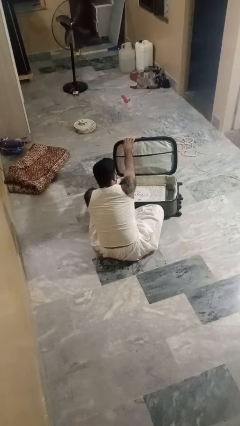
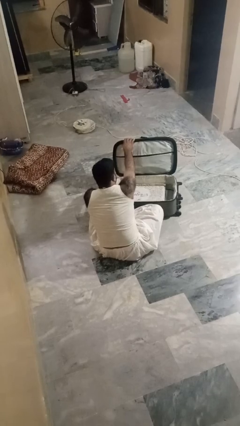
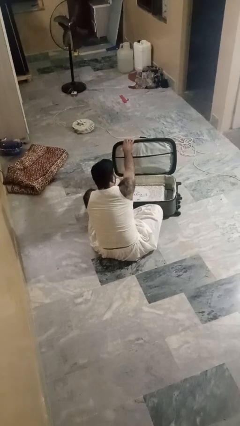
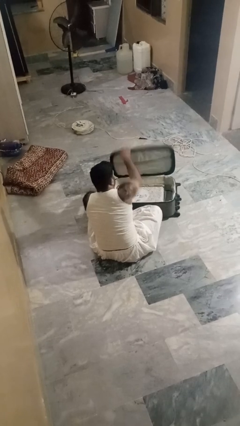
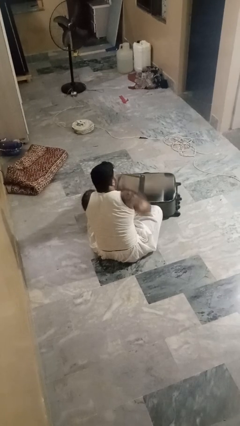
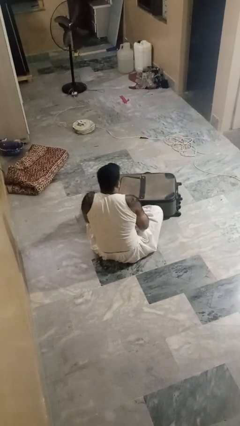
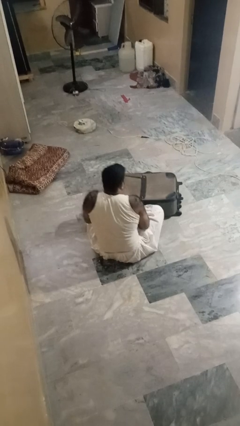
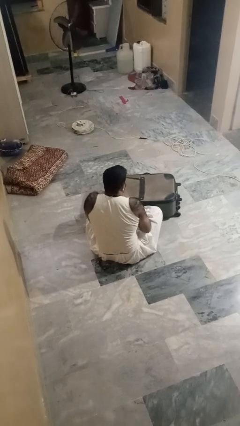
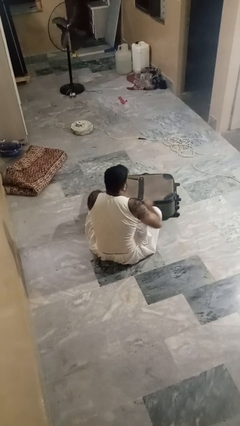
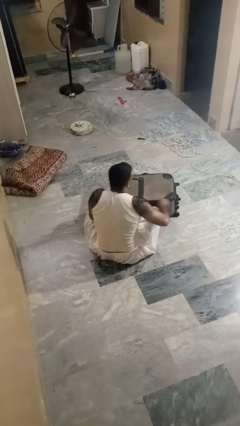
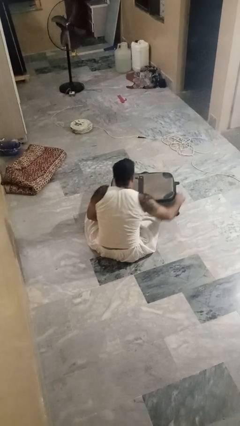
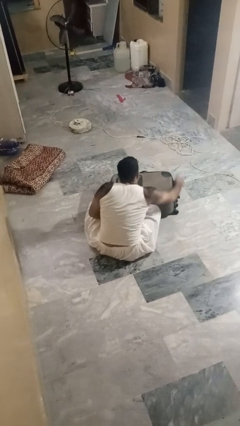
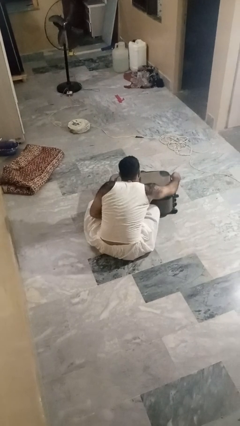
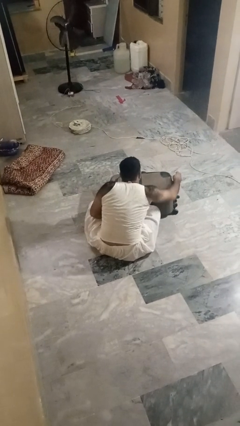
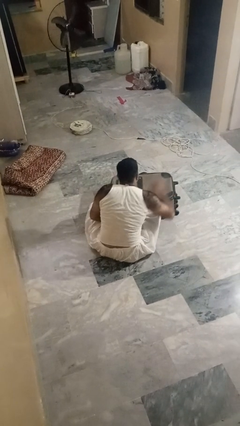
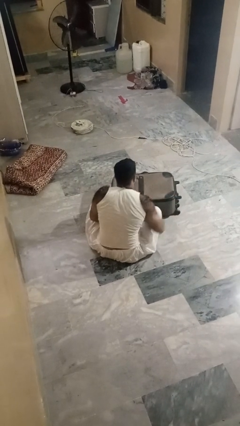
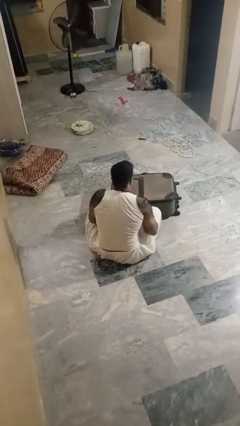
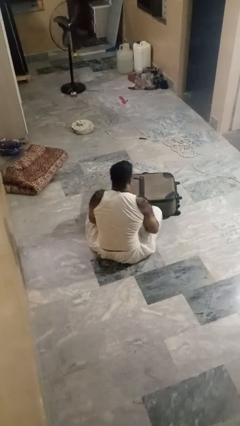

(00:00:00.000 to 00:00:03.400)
person closes suitcase

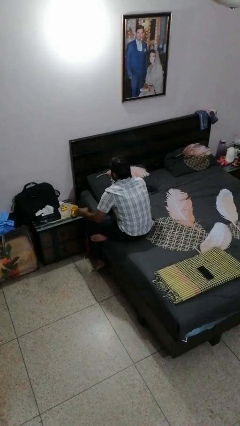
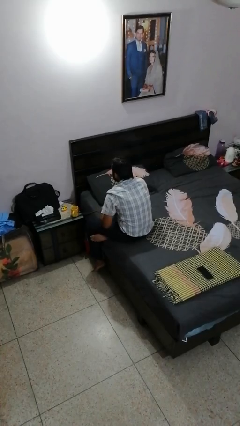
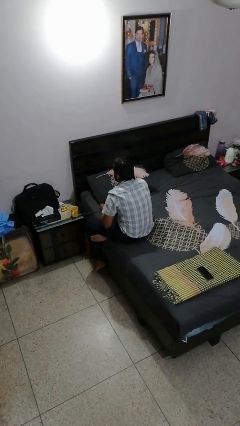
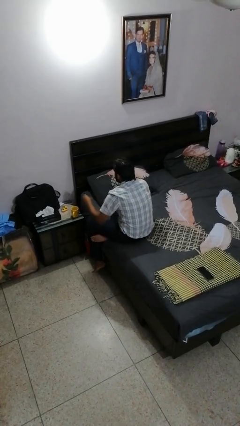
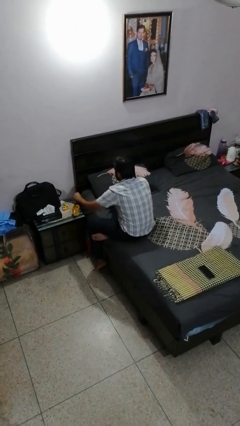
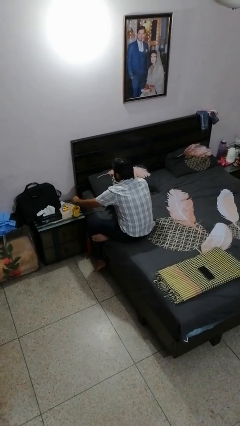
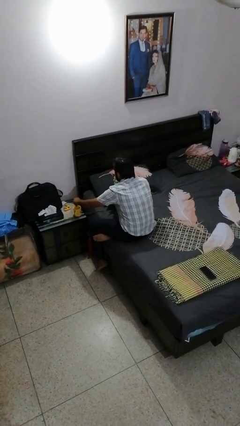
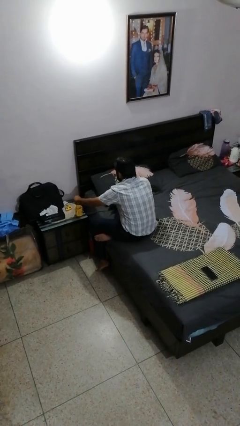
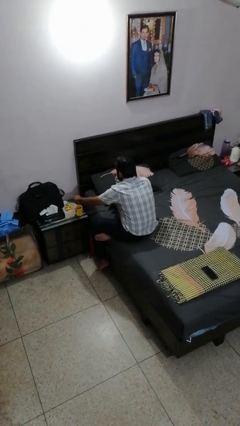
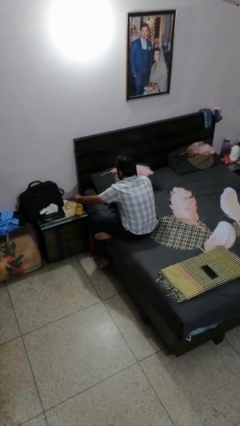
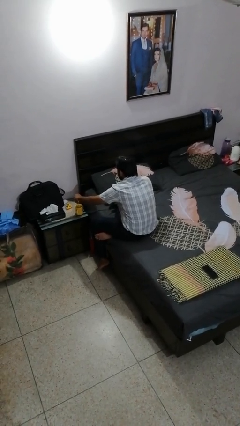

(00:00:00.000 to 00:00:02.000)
person stirs mug

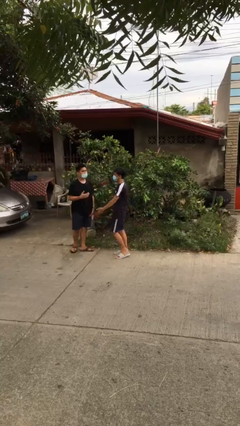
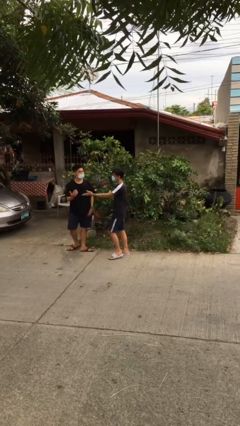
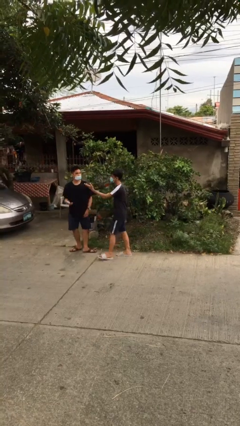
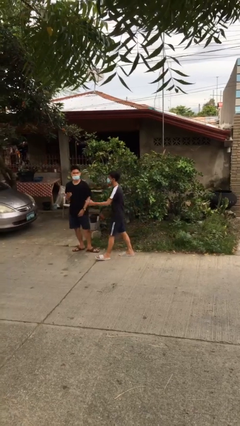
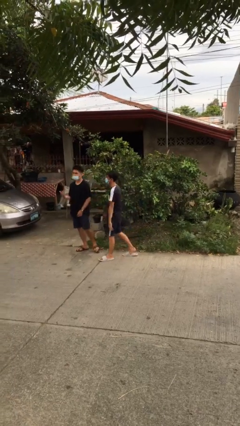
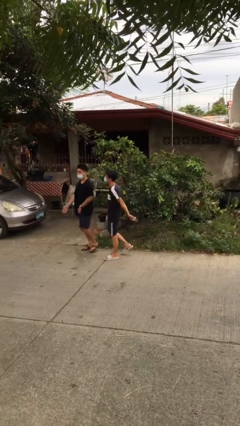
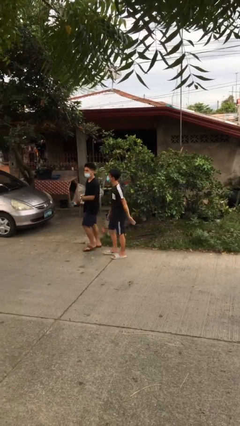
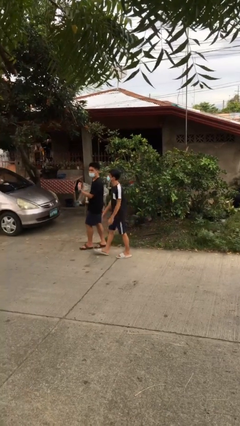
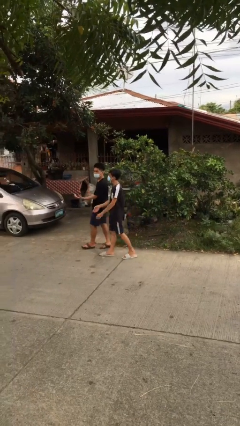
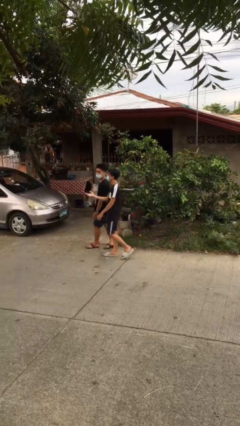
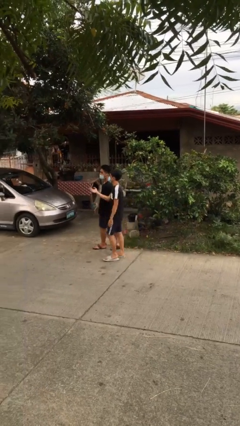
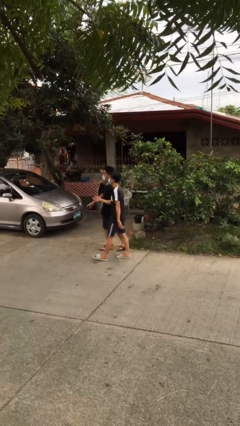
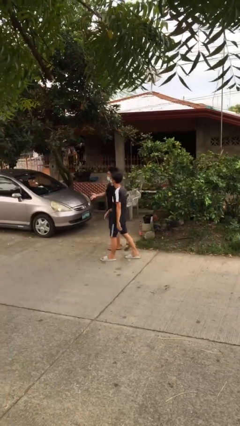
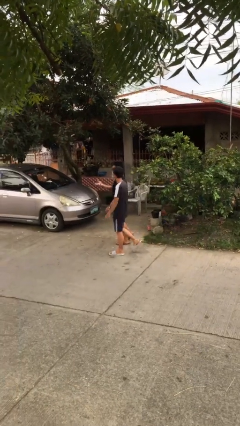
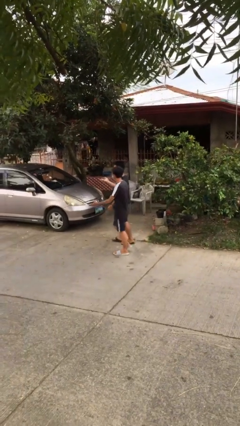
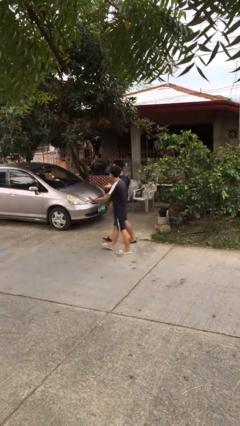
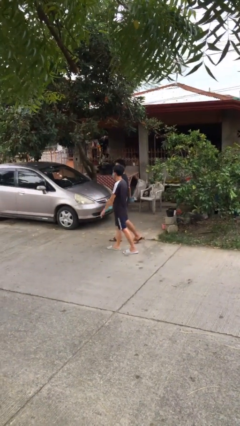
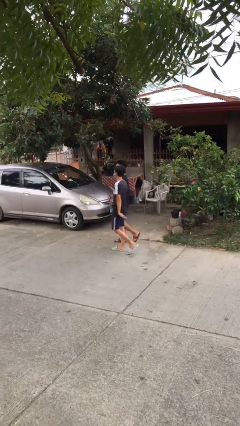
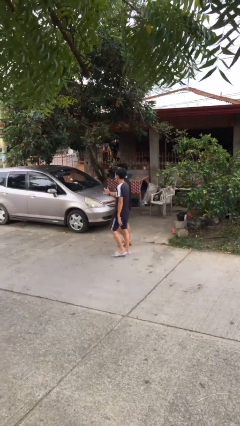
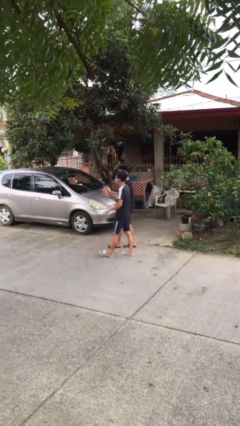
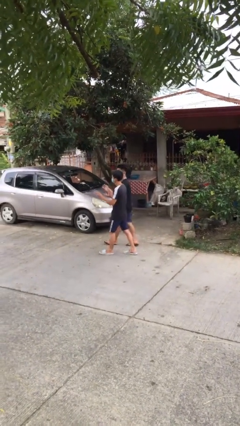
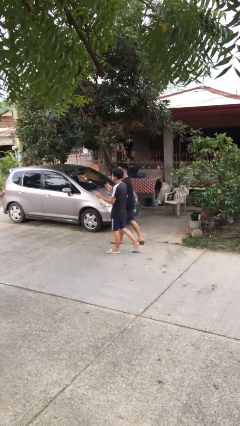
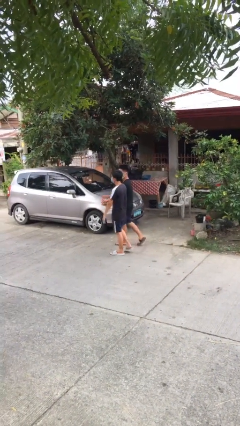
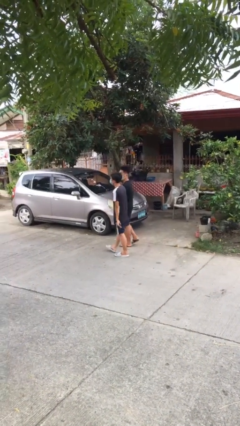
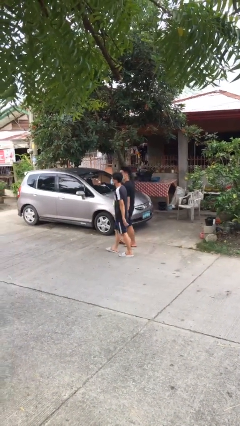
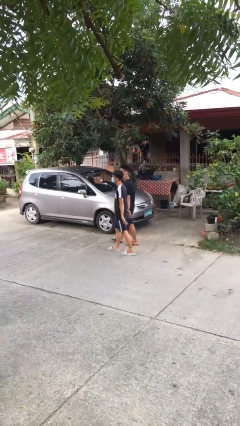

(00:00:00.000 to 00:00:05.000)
person talks to person

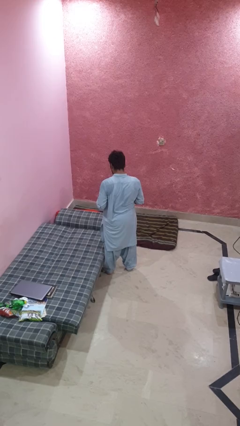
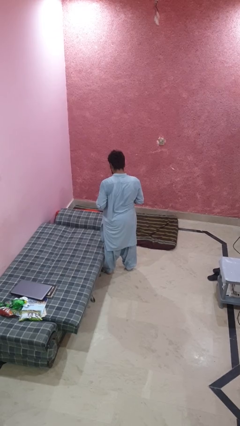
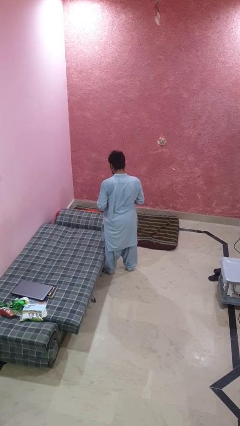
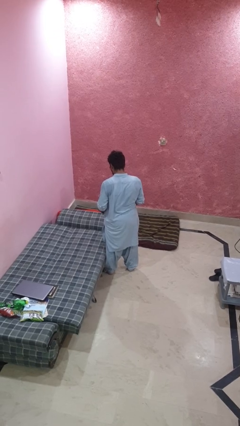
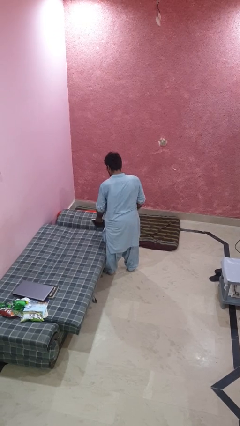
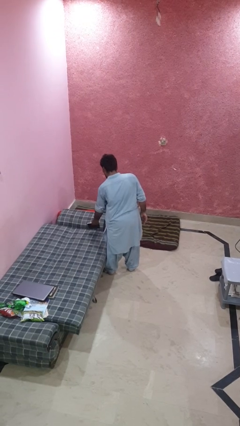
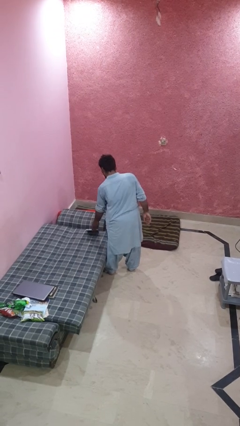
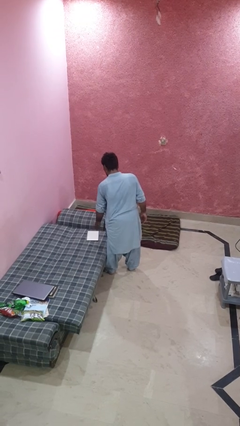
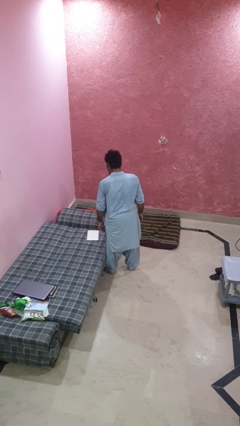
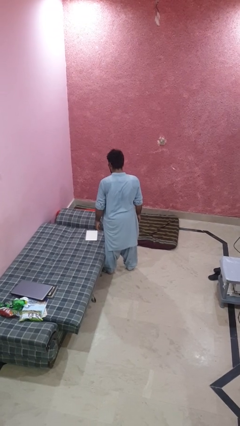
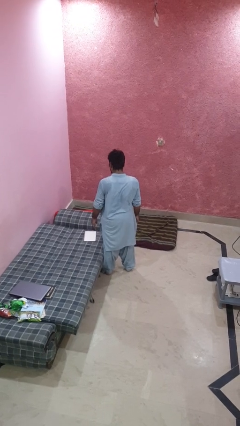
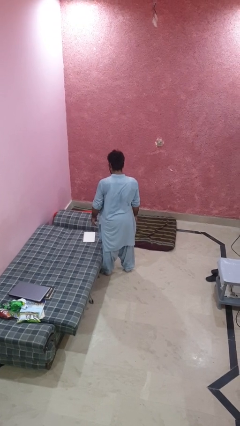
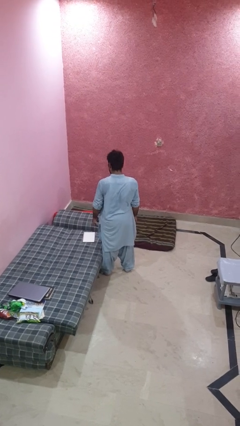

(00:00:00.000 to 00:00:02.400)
person puts down object on bed

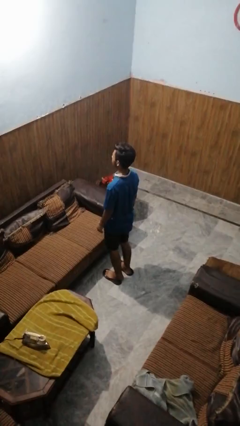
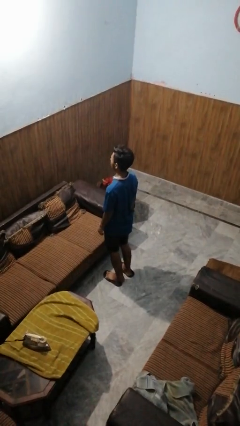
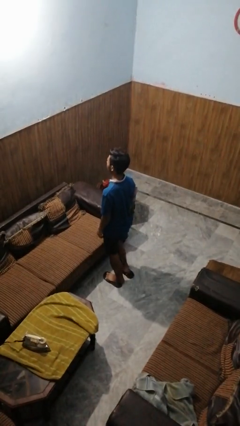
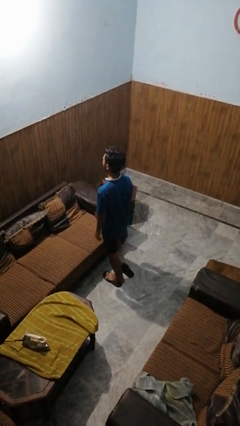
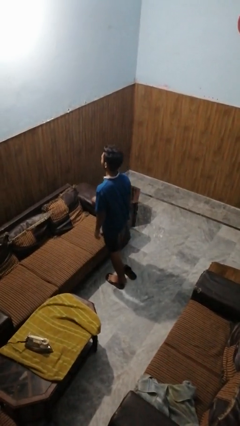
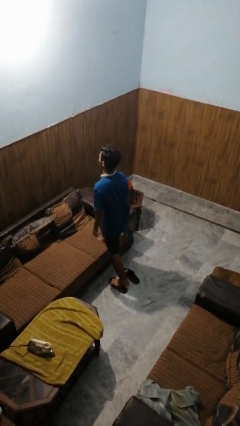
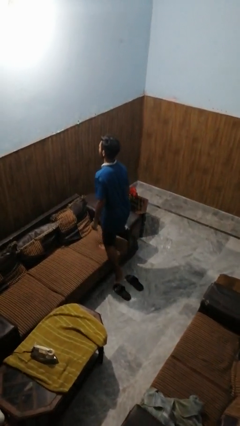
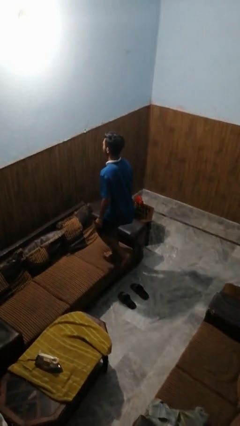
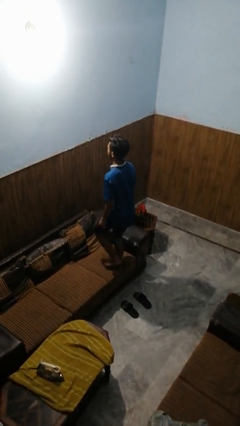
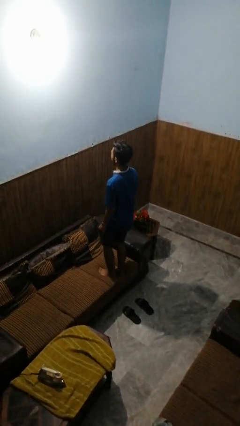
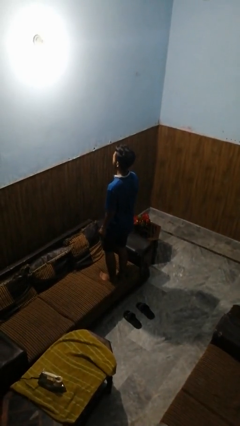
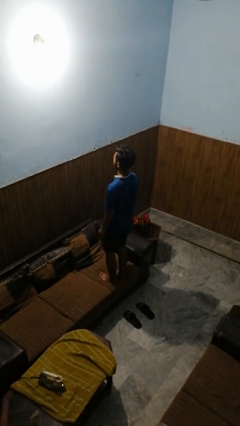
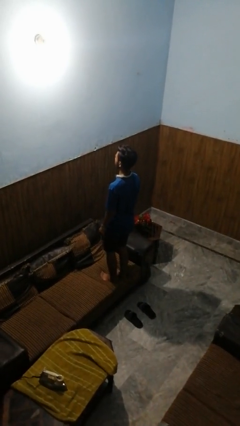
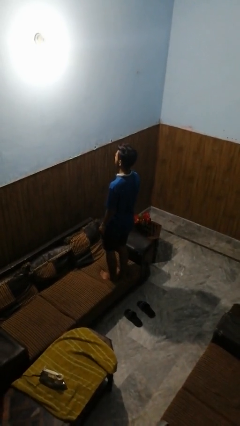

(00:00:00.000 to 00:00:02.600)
person climbs on couch

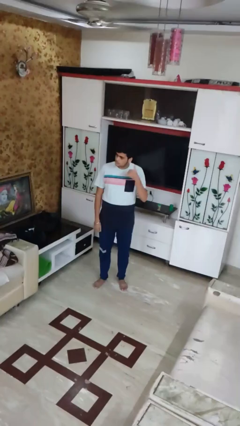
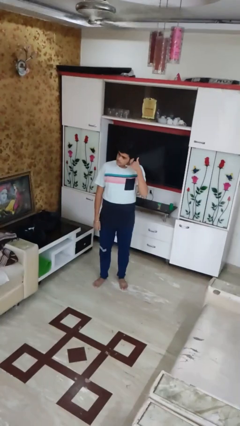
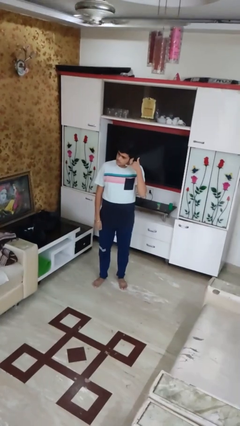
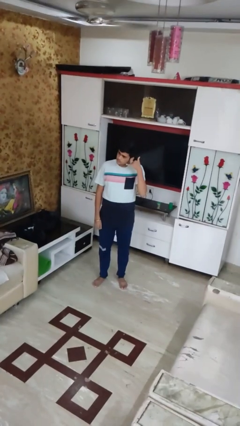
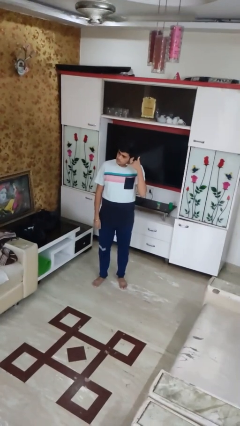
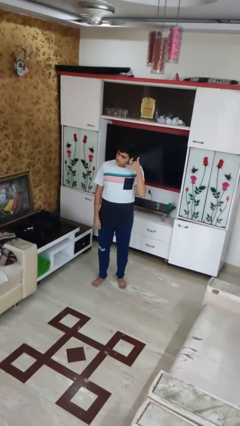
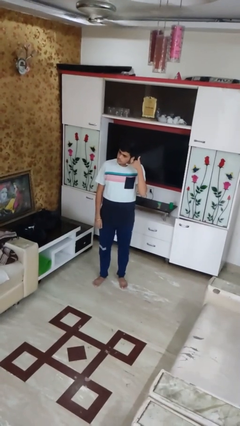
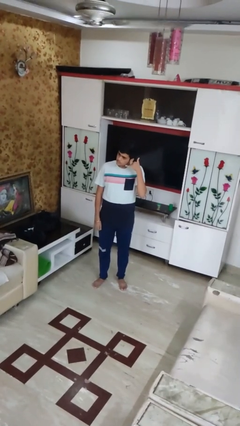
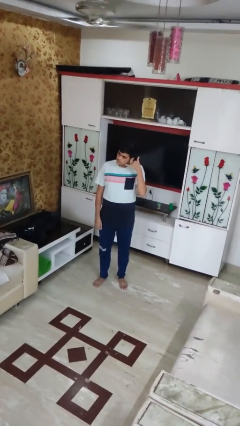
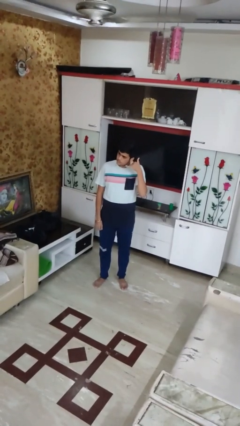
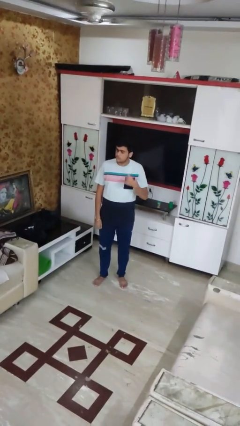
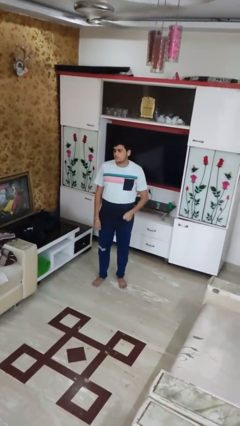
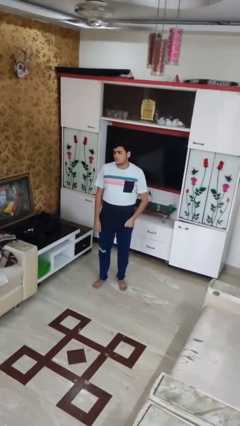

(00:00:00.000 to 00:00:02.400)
person gestures call me
